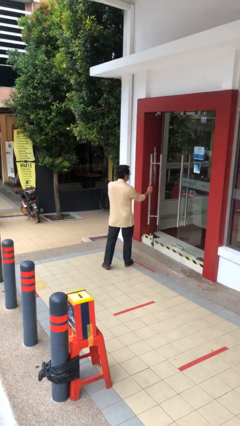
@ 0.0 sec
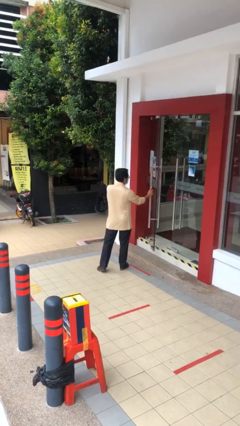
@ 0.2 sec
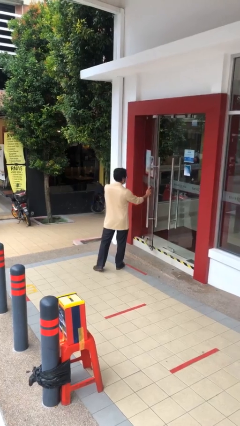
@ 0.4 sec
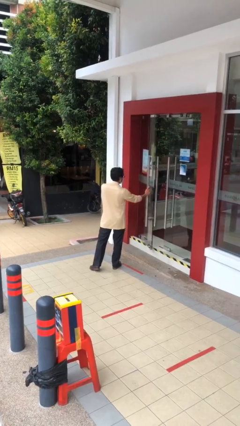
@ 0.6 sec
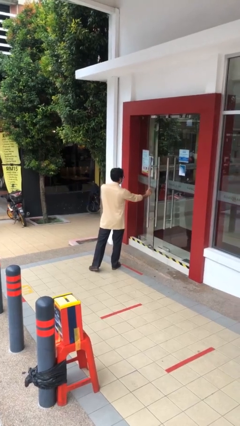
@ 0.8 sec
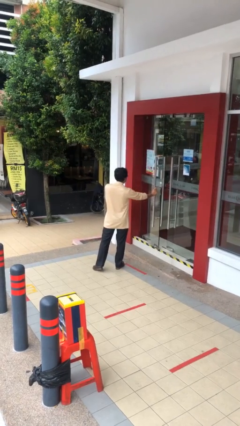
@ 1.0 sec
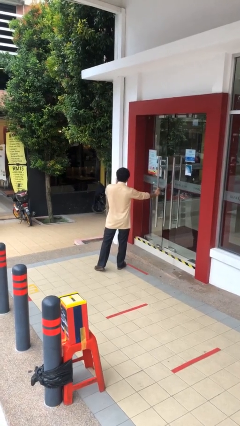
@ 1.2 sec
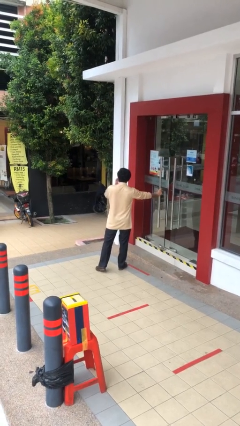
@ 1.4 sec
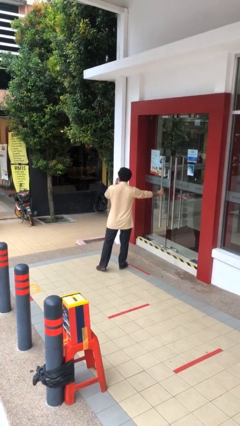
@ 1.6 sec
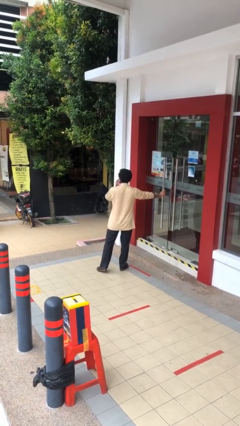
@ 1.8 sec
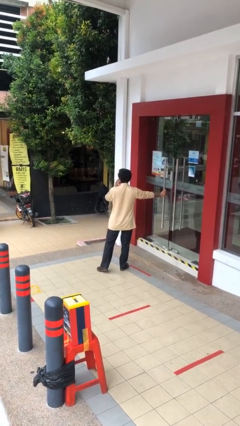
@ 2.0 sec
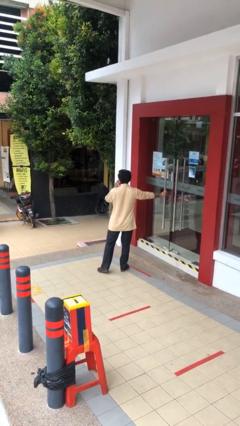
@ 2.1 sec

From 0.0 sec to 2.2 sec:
person closes facility door

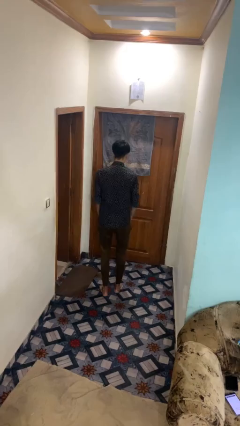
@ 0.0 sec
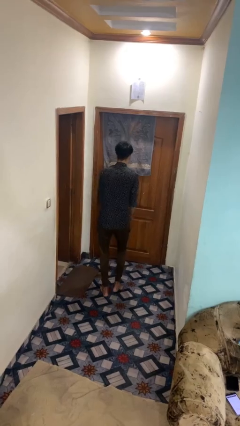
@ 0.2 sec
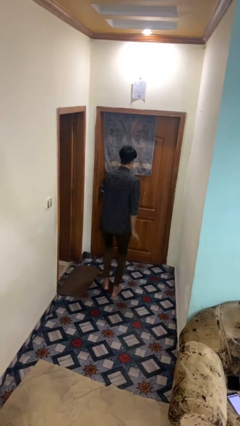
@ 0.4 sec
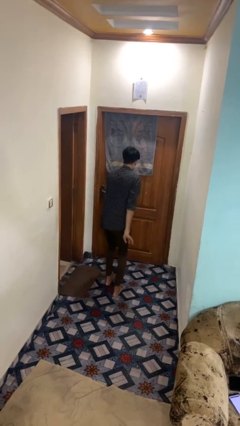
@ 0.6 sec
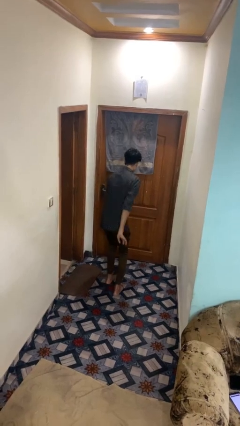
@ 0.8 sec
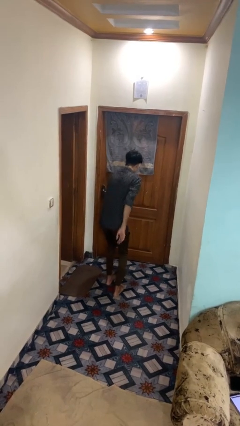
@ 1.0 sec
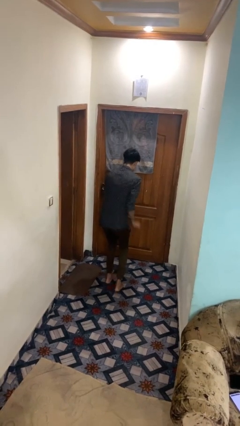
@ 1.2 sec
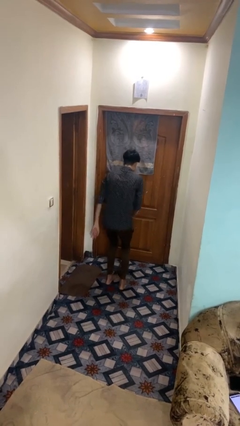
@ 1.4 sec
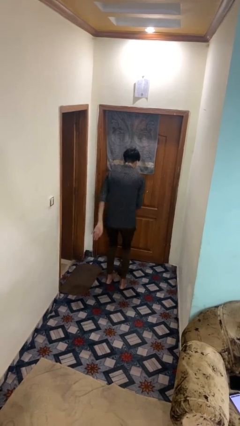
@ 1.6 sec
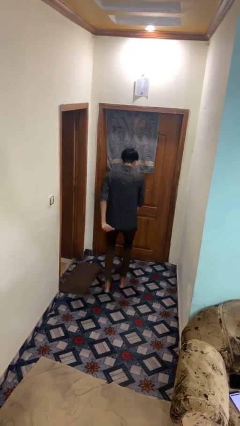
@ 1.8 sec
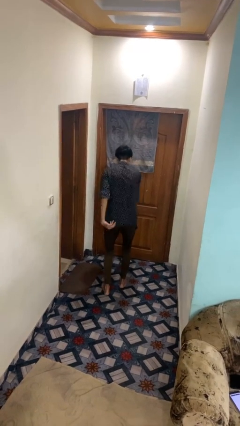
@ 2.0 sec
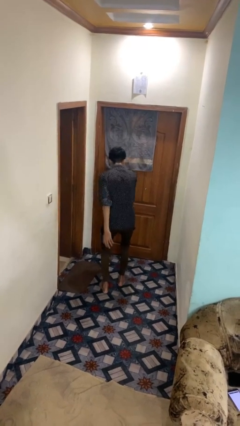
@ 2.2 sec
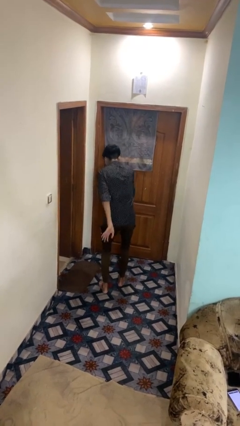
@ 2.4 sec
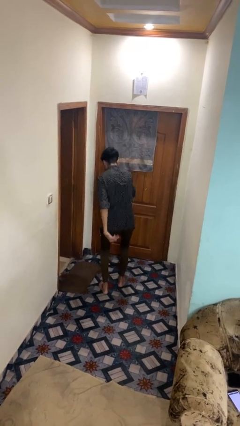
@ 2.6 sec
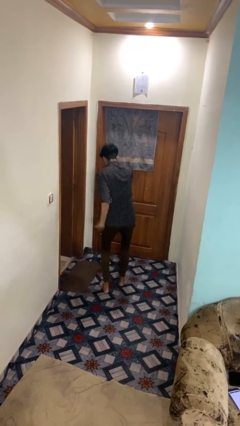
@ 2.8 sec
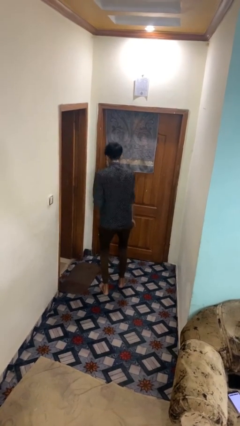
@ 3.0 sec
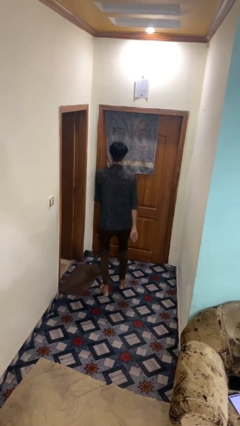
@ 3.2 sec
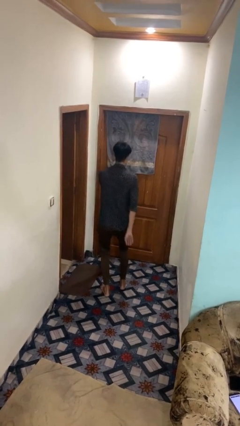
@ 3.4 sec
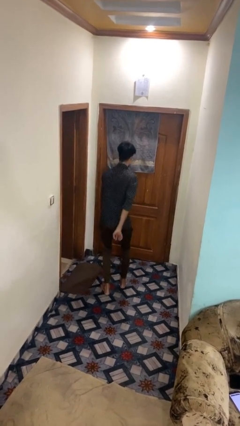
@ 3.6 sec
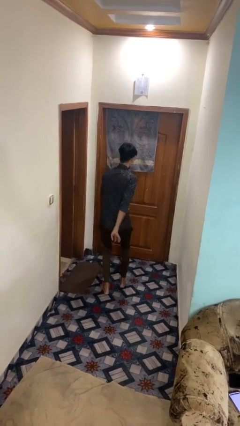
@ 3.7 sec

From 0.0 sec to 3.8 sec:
person dances in place

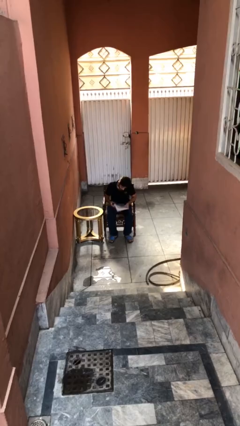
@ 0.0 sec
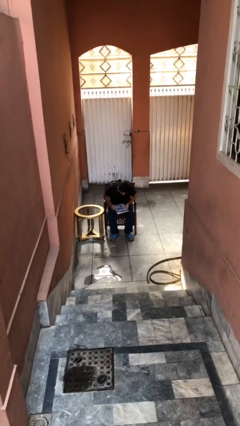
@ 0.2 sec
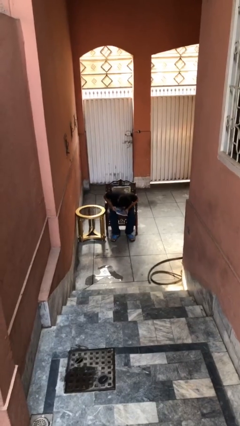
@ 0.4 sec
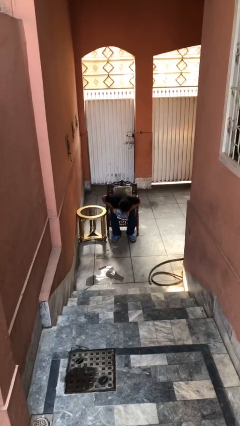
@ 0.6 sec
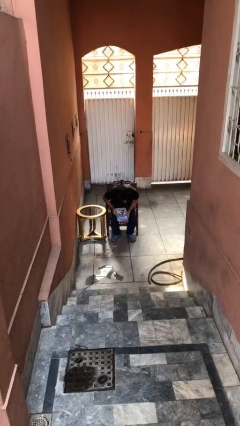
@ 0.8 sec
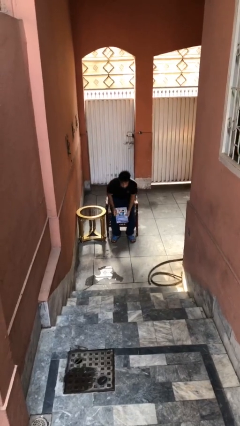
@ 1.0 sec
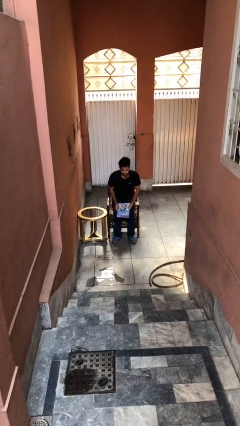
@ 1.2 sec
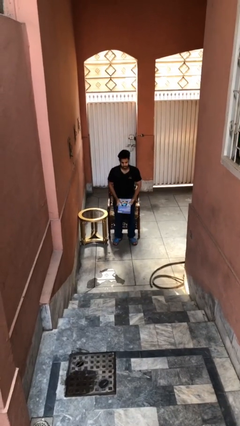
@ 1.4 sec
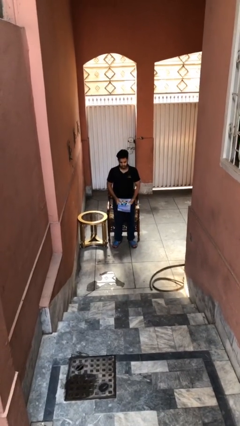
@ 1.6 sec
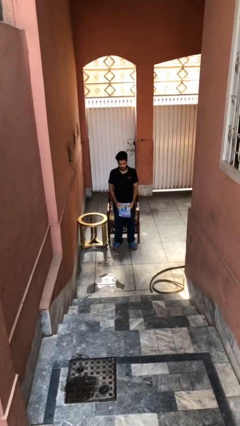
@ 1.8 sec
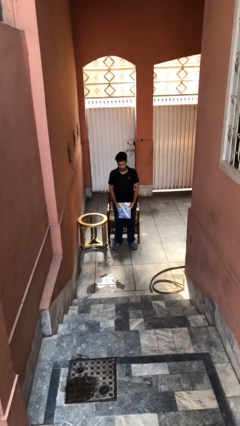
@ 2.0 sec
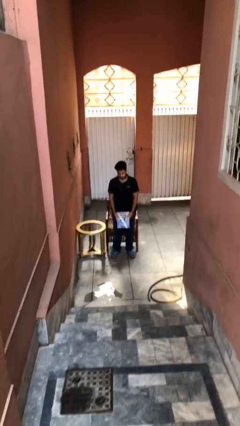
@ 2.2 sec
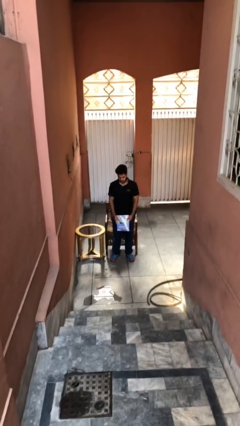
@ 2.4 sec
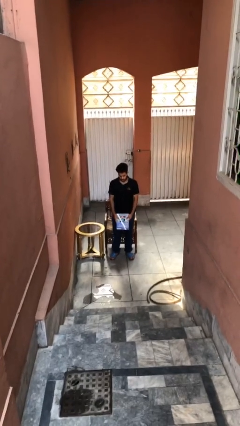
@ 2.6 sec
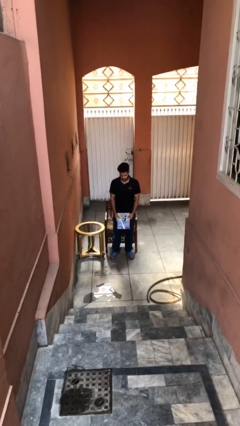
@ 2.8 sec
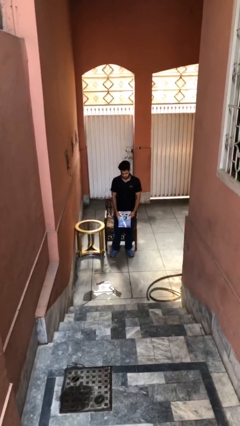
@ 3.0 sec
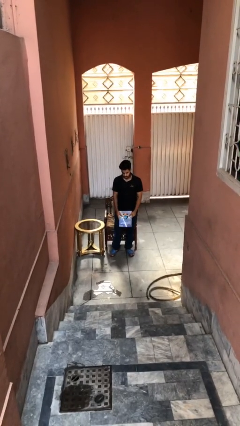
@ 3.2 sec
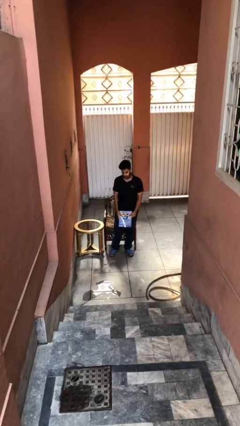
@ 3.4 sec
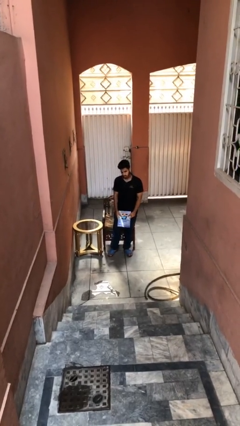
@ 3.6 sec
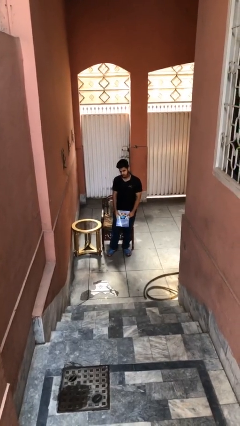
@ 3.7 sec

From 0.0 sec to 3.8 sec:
person stands up

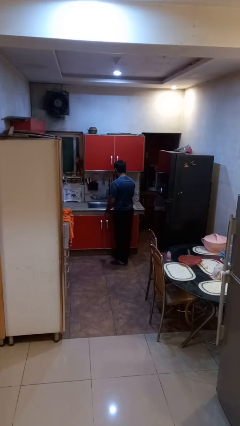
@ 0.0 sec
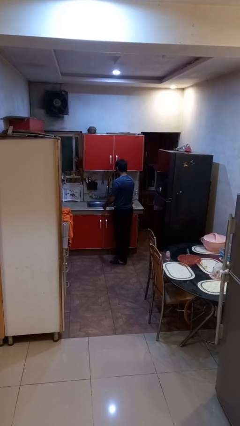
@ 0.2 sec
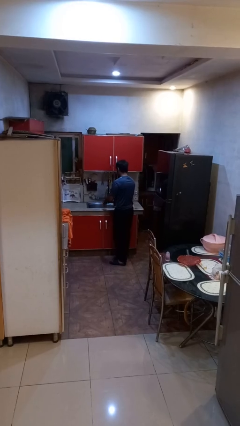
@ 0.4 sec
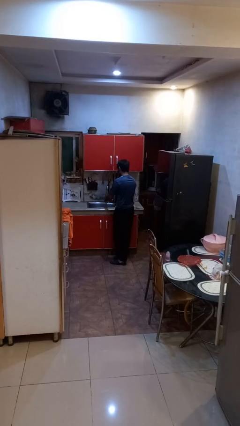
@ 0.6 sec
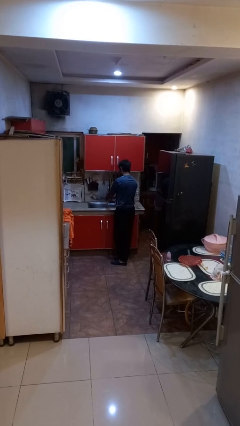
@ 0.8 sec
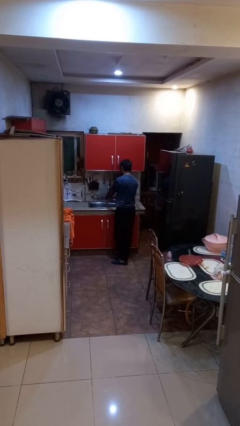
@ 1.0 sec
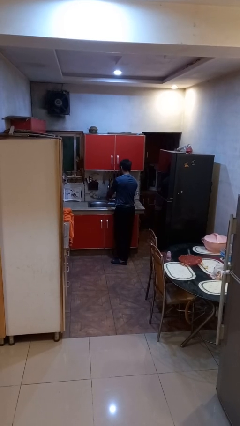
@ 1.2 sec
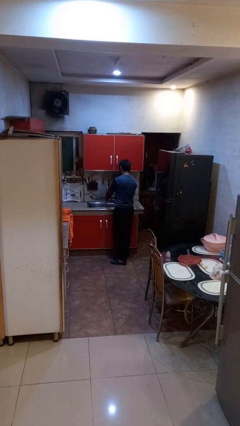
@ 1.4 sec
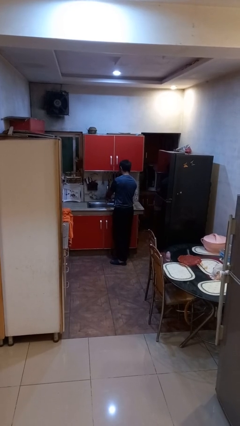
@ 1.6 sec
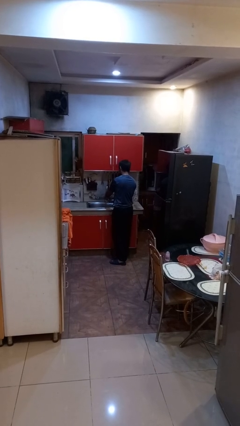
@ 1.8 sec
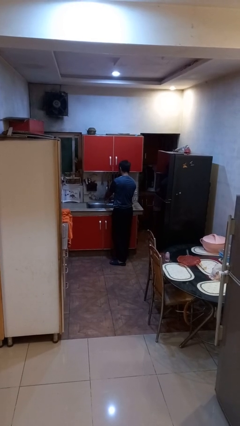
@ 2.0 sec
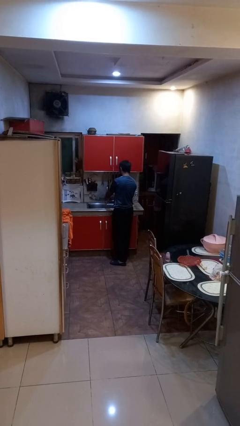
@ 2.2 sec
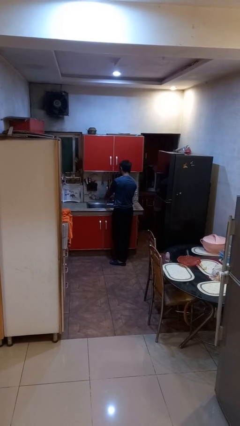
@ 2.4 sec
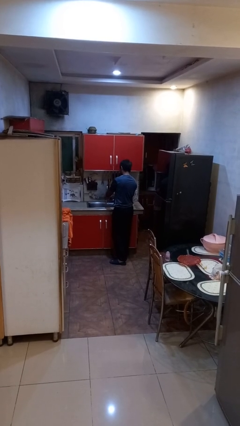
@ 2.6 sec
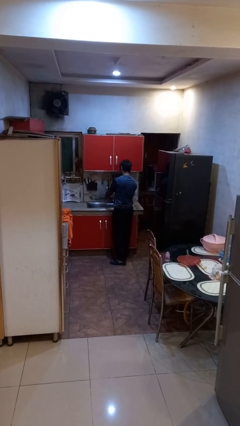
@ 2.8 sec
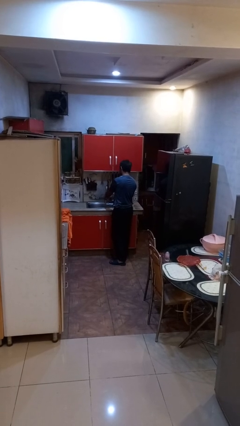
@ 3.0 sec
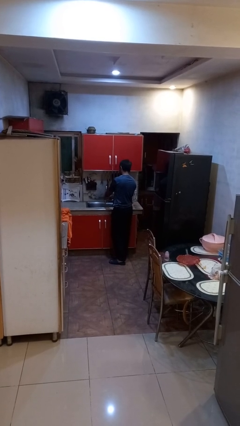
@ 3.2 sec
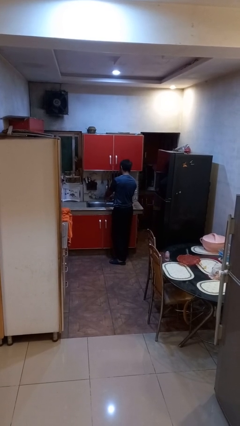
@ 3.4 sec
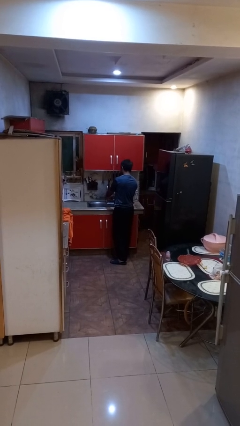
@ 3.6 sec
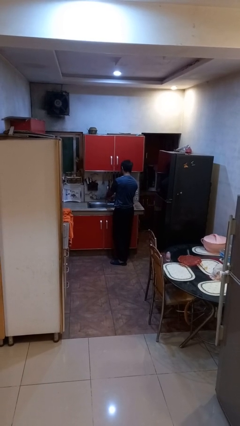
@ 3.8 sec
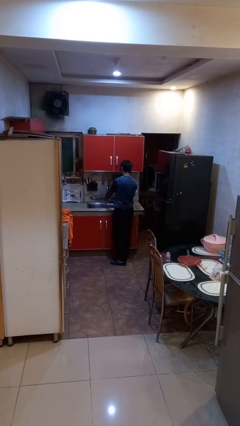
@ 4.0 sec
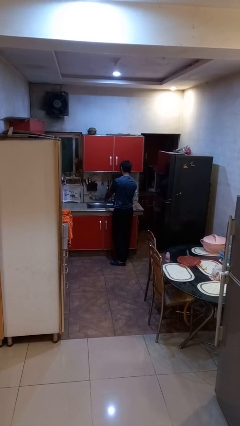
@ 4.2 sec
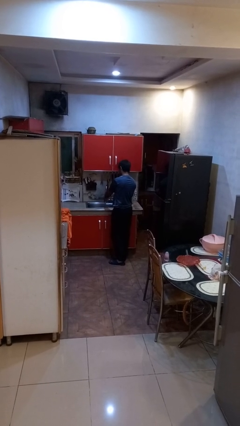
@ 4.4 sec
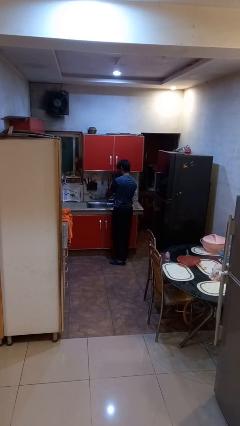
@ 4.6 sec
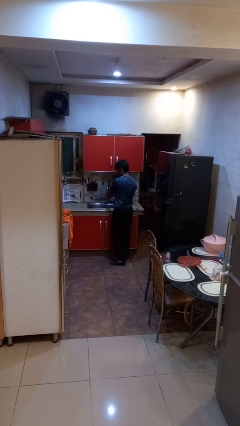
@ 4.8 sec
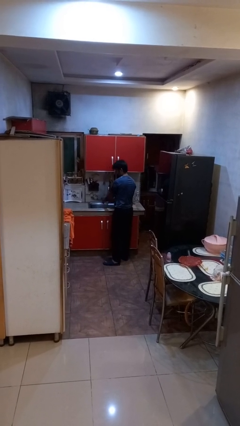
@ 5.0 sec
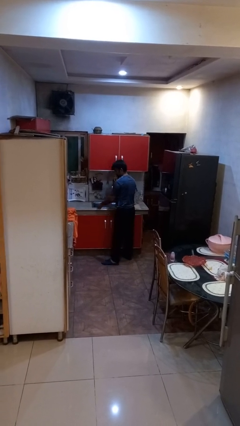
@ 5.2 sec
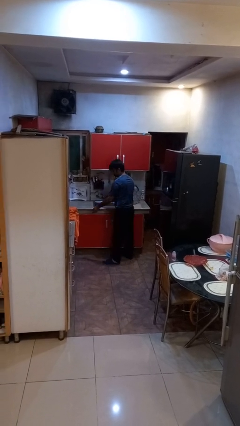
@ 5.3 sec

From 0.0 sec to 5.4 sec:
person washes hands

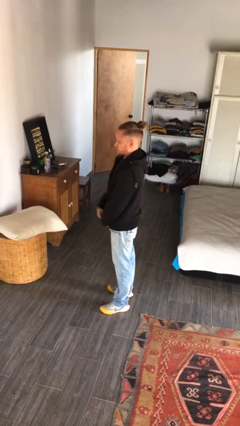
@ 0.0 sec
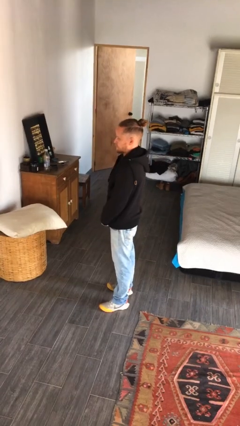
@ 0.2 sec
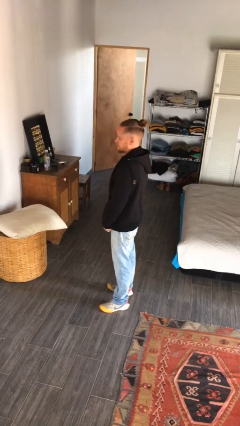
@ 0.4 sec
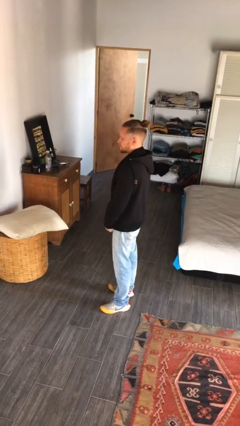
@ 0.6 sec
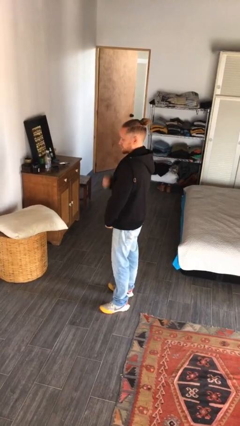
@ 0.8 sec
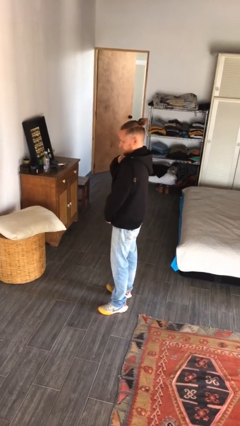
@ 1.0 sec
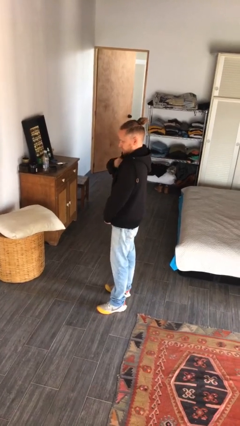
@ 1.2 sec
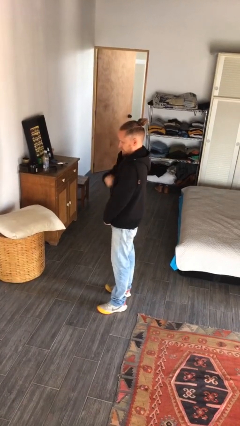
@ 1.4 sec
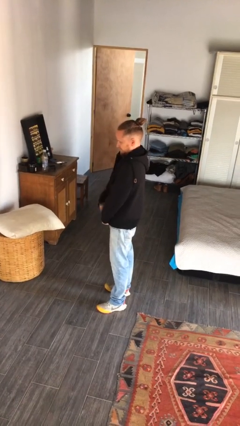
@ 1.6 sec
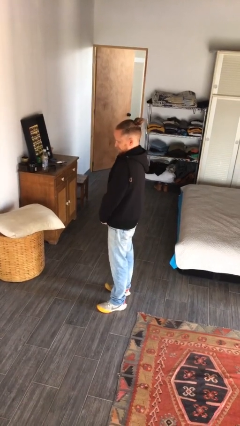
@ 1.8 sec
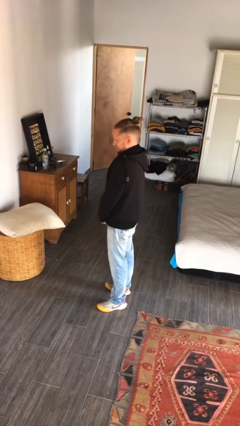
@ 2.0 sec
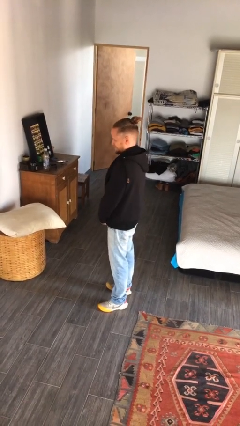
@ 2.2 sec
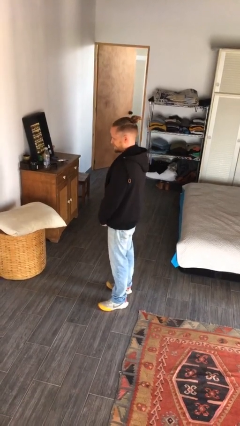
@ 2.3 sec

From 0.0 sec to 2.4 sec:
person unzips jacket
